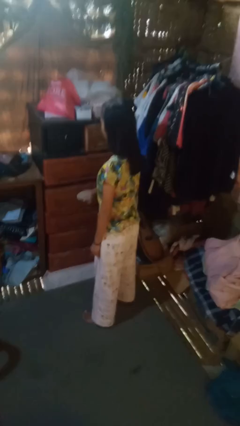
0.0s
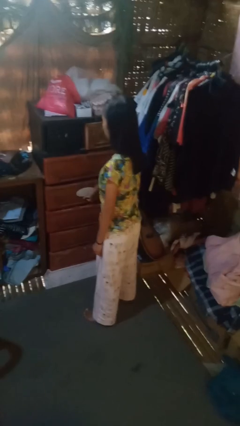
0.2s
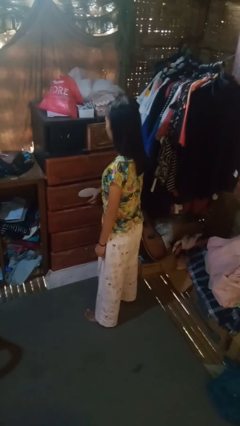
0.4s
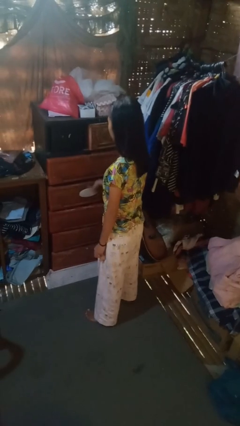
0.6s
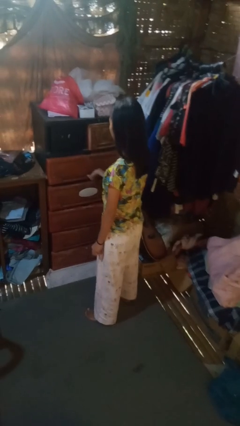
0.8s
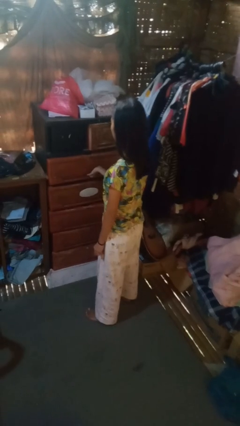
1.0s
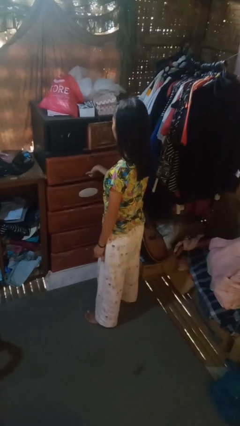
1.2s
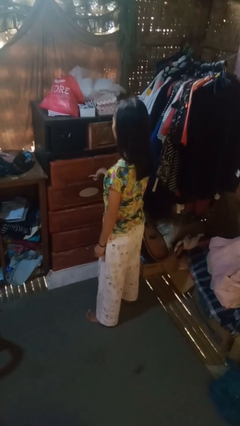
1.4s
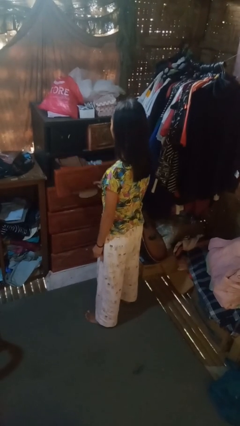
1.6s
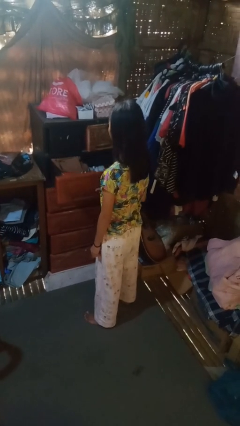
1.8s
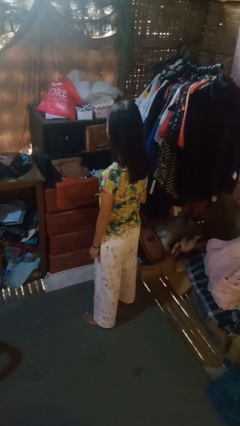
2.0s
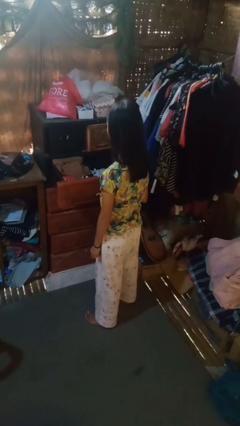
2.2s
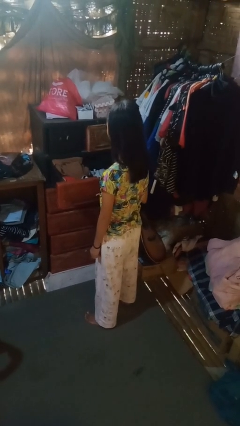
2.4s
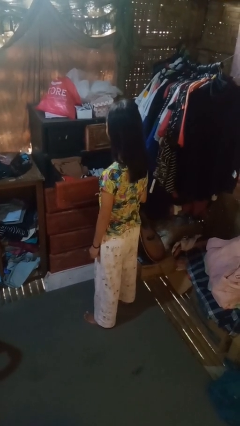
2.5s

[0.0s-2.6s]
person opens dresser drawer

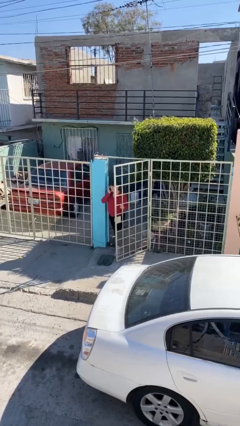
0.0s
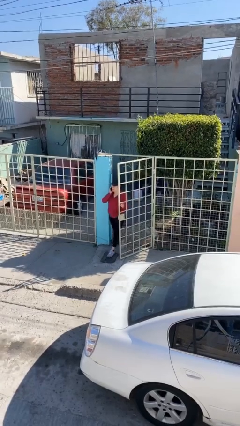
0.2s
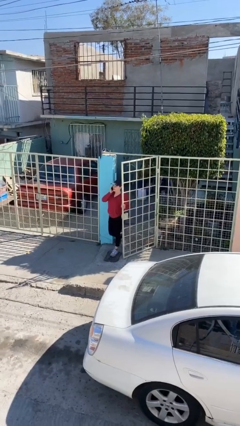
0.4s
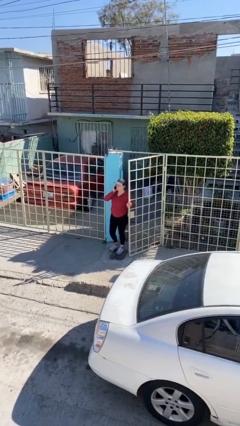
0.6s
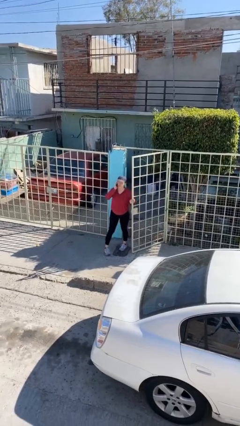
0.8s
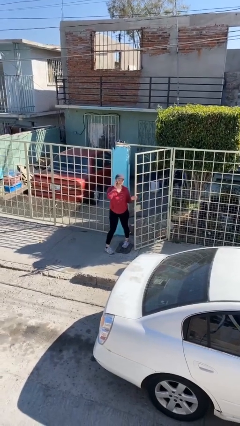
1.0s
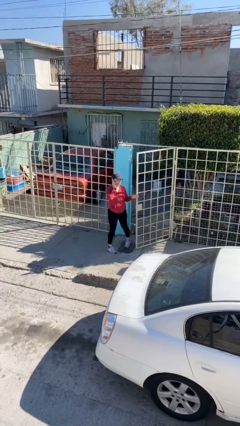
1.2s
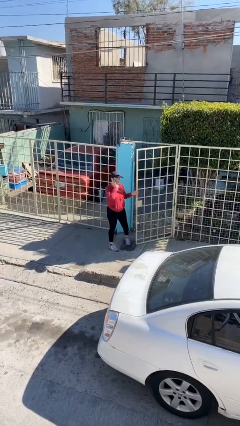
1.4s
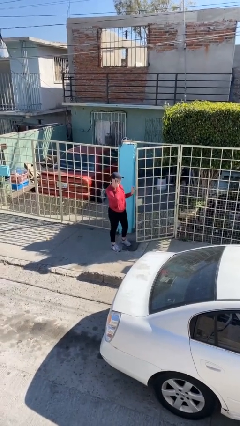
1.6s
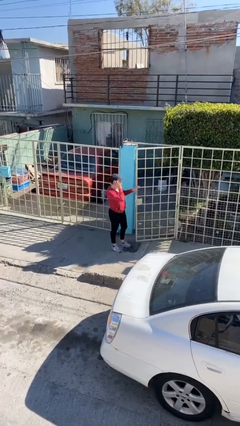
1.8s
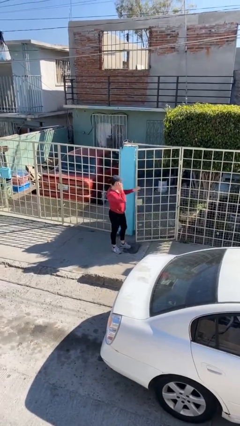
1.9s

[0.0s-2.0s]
person enters scene through structure

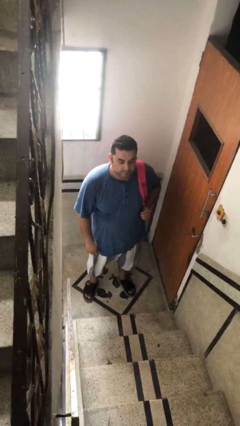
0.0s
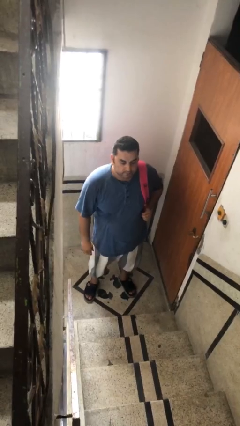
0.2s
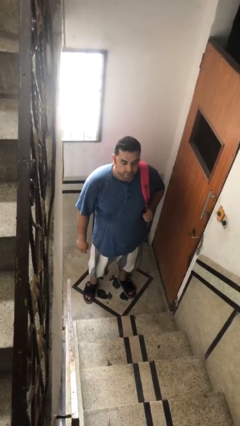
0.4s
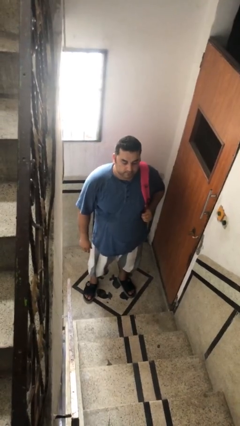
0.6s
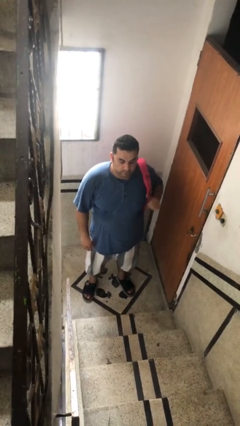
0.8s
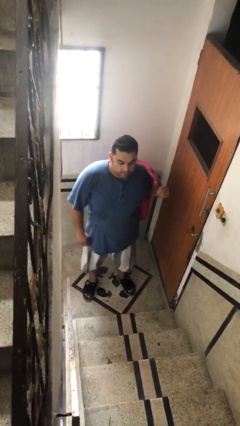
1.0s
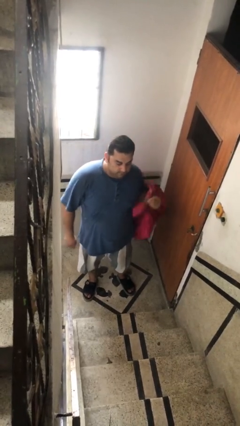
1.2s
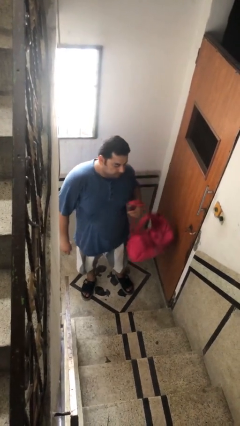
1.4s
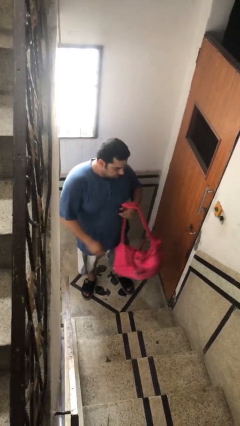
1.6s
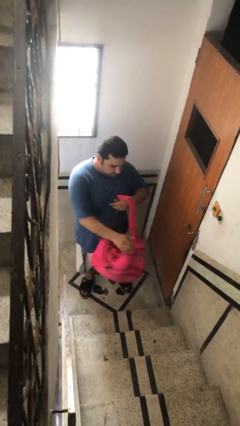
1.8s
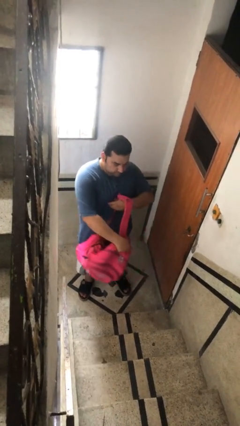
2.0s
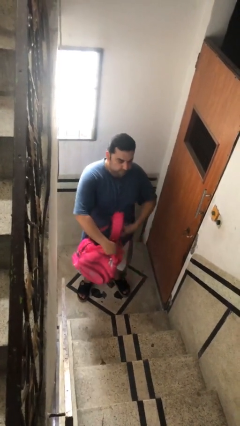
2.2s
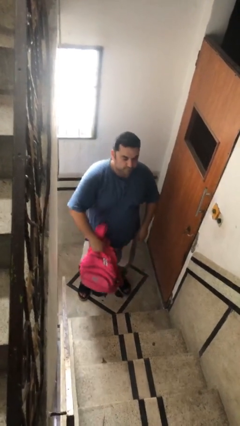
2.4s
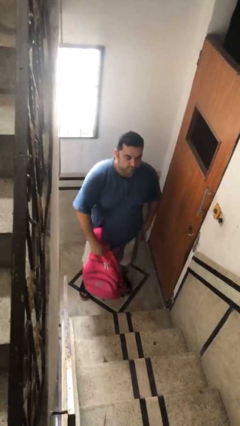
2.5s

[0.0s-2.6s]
person takes off backpack

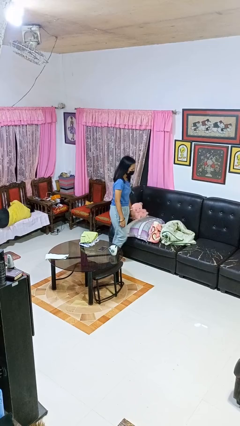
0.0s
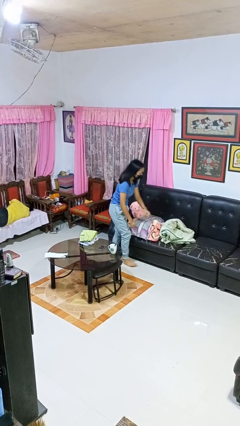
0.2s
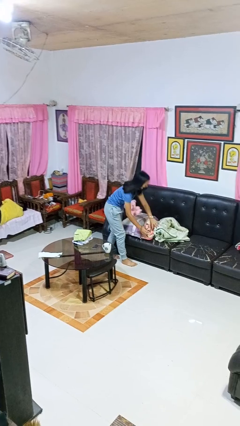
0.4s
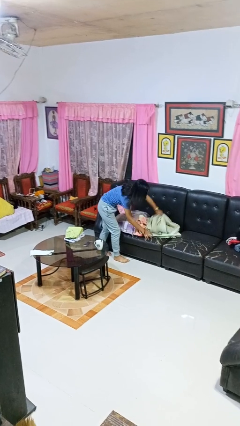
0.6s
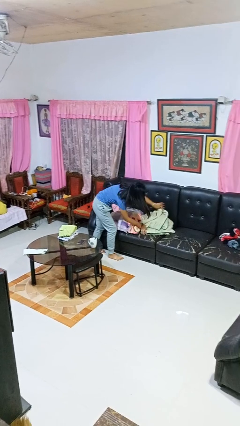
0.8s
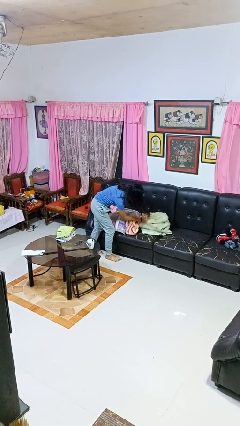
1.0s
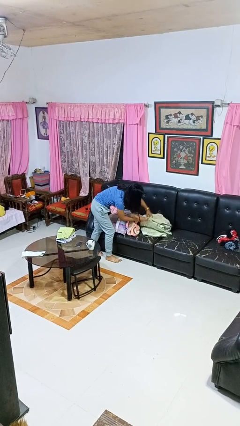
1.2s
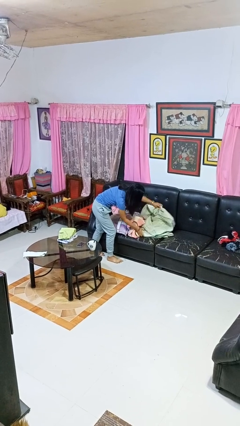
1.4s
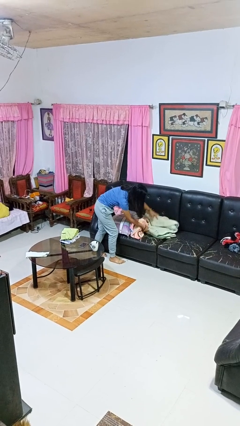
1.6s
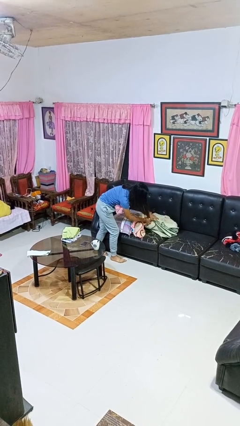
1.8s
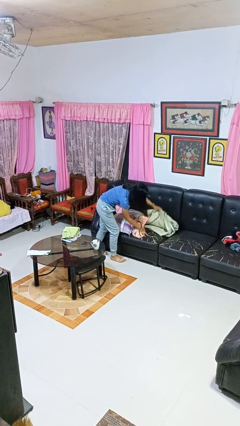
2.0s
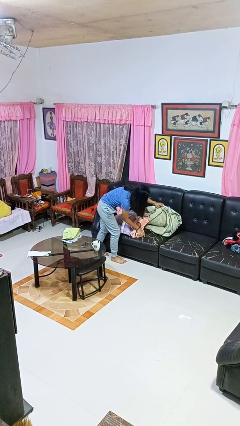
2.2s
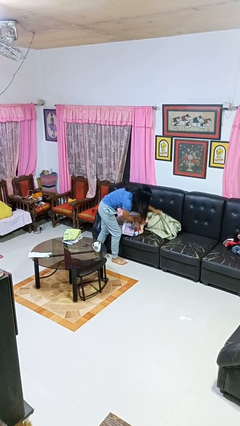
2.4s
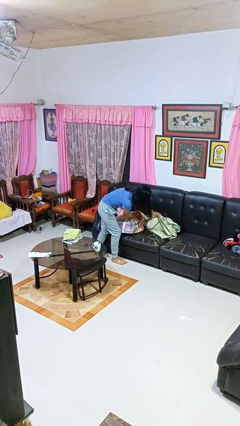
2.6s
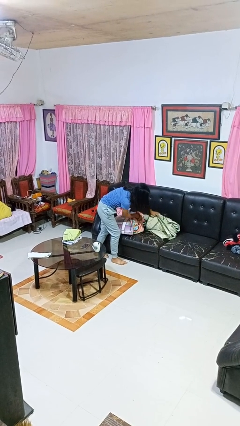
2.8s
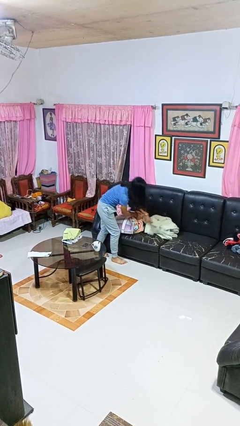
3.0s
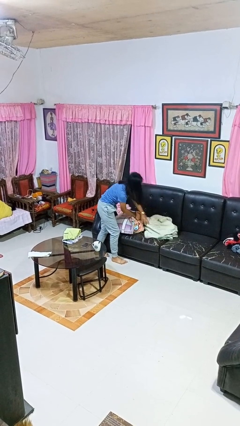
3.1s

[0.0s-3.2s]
person searches in couch

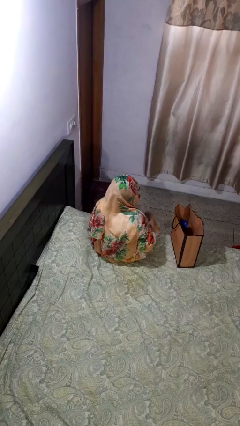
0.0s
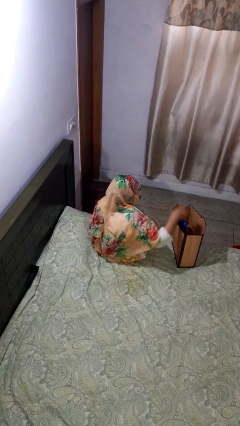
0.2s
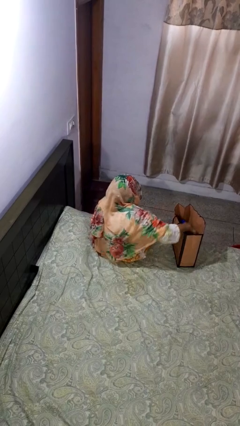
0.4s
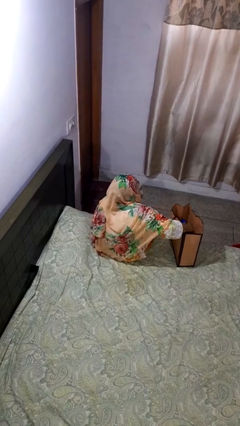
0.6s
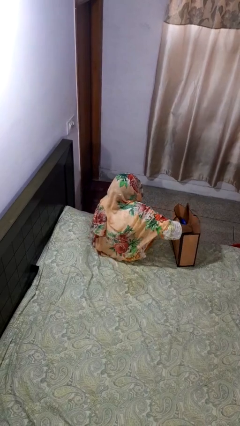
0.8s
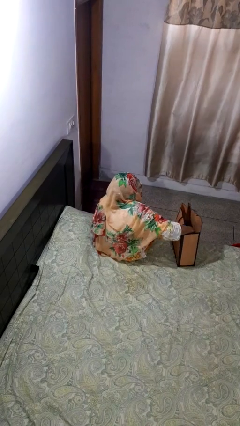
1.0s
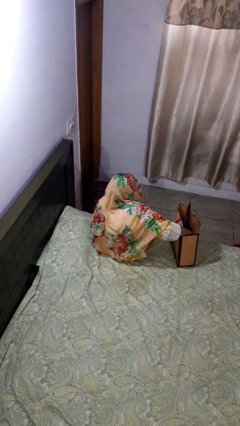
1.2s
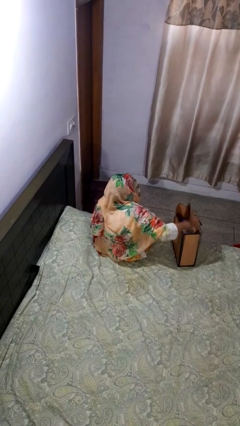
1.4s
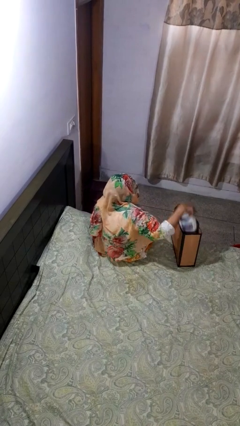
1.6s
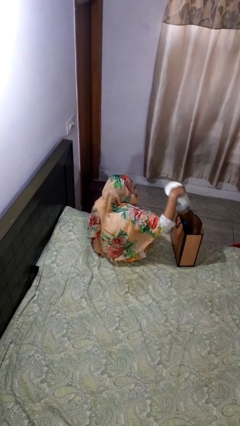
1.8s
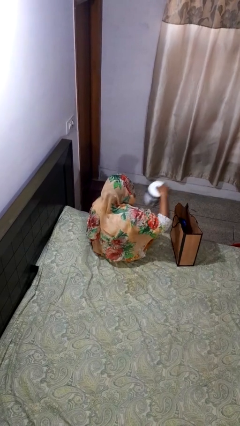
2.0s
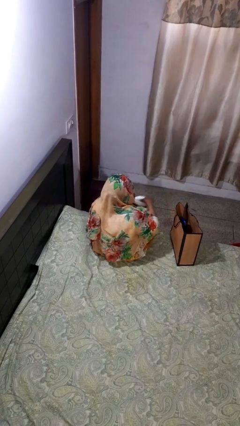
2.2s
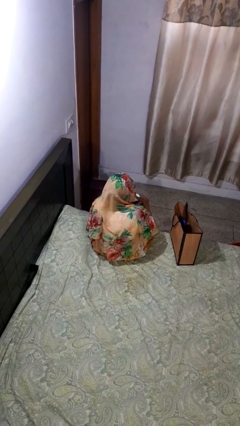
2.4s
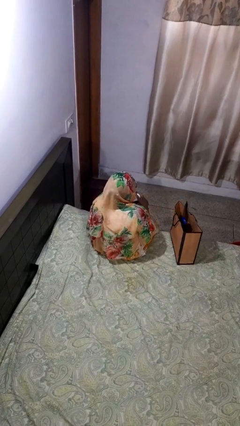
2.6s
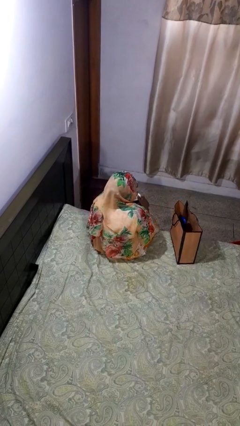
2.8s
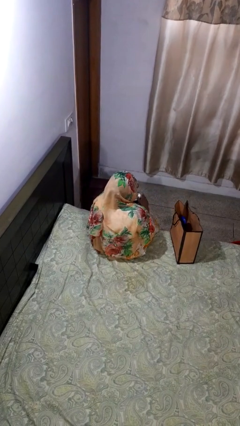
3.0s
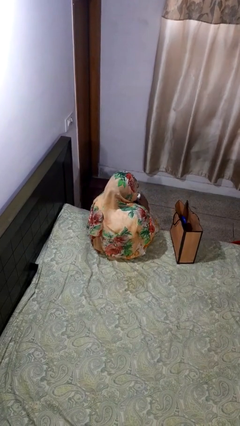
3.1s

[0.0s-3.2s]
person takes object from bag

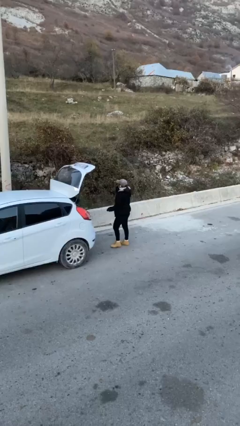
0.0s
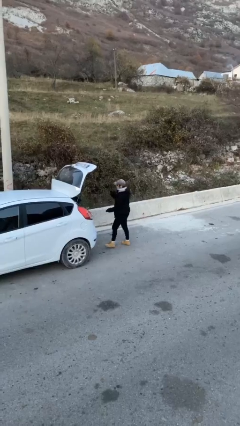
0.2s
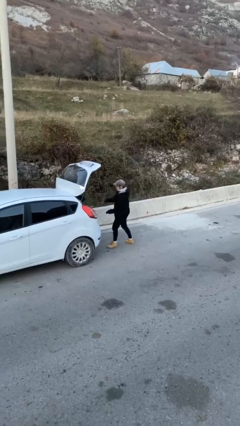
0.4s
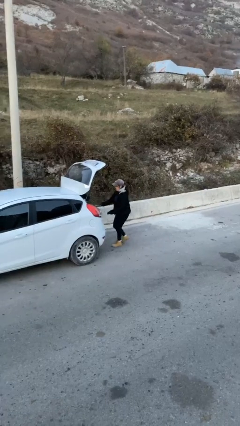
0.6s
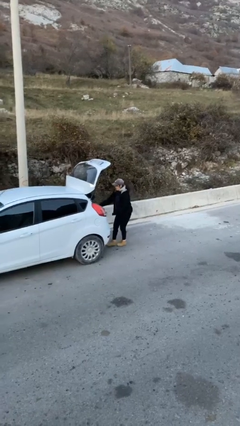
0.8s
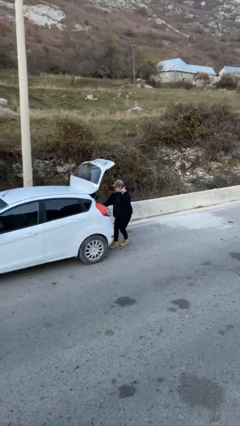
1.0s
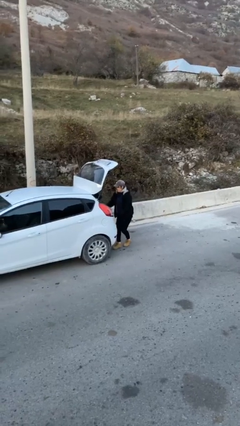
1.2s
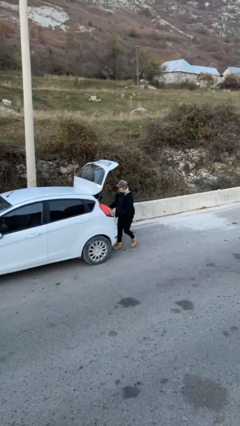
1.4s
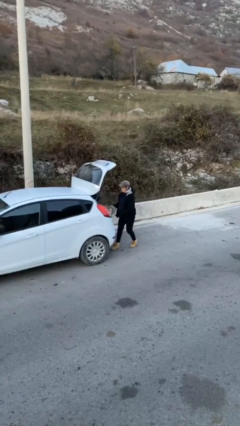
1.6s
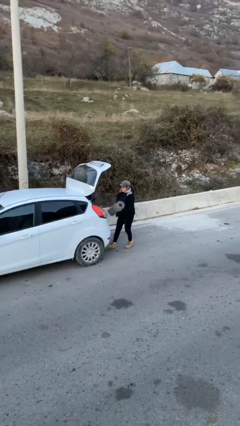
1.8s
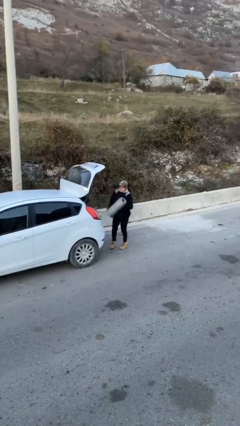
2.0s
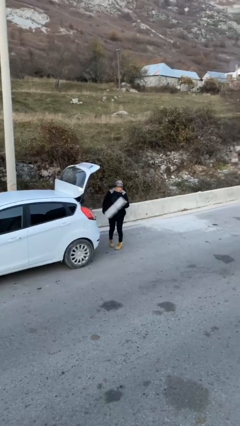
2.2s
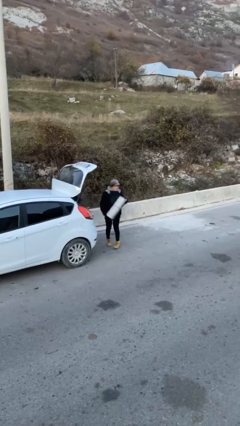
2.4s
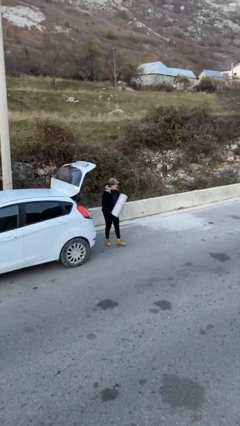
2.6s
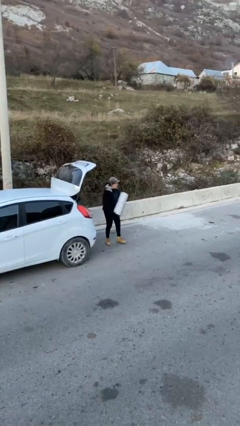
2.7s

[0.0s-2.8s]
person unloads car

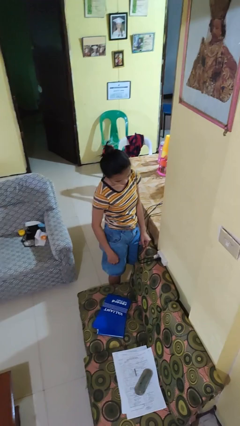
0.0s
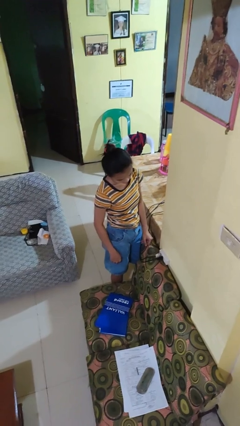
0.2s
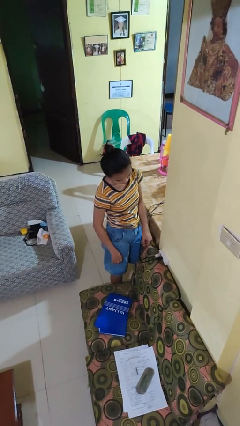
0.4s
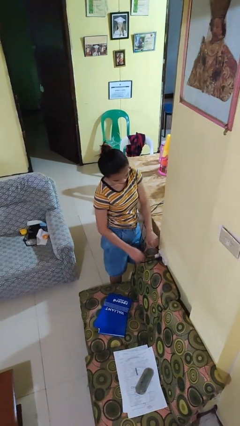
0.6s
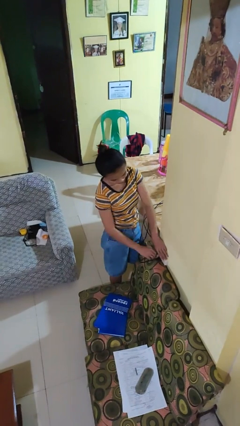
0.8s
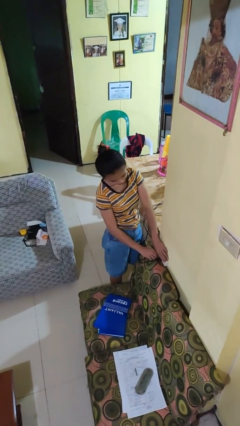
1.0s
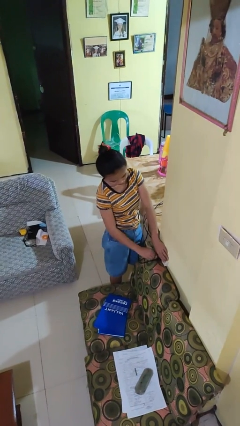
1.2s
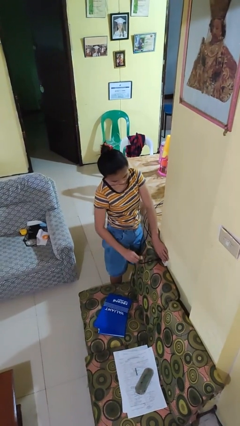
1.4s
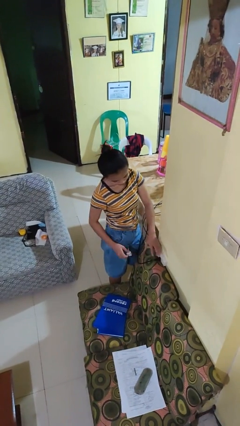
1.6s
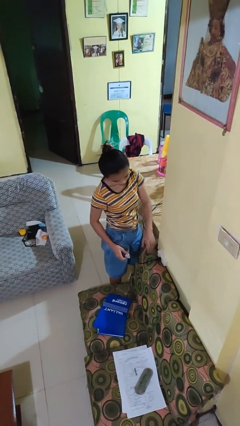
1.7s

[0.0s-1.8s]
person unplugs from electrical socket
